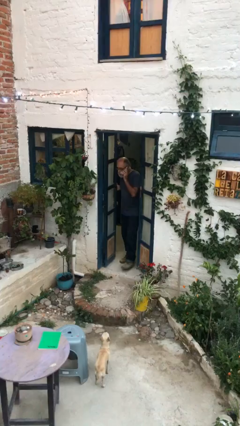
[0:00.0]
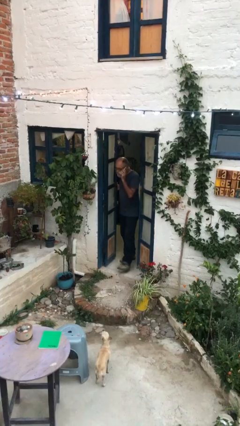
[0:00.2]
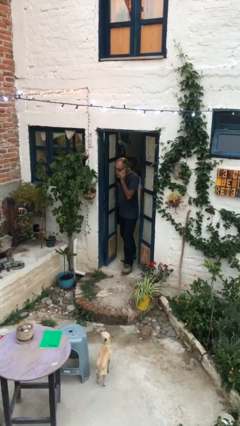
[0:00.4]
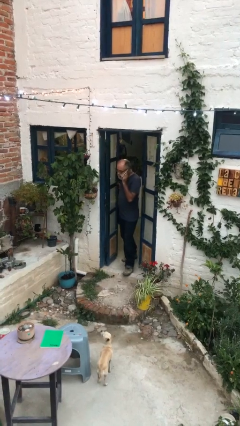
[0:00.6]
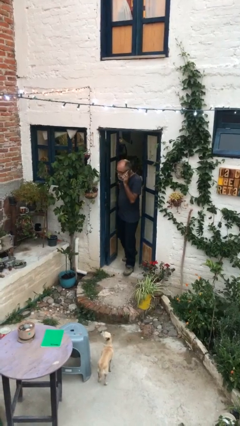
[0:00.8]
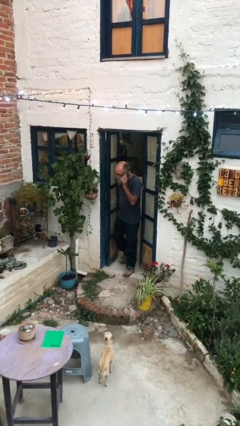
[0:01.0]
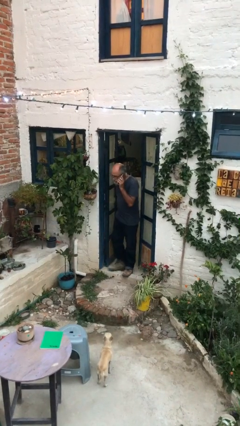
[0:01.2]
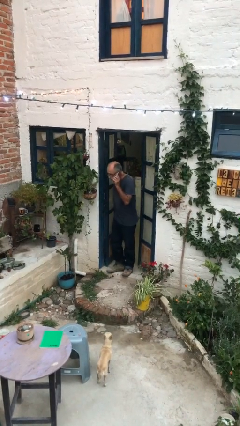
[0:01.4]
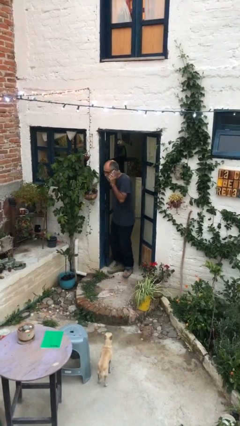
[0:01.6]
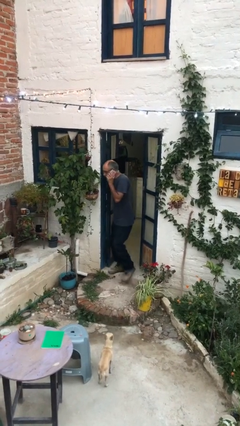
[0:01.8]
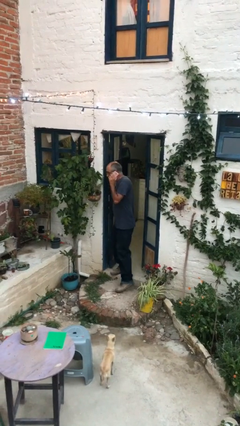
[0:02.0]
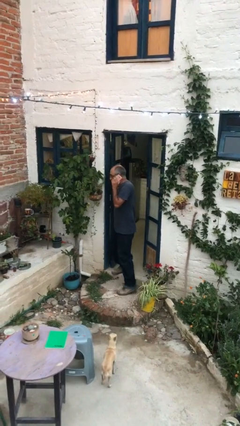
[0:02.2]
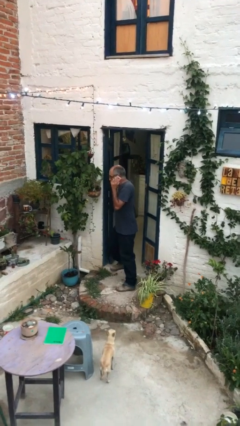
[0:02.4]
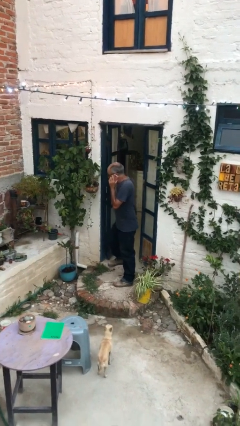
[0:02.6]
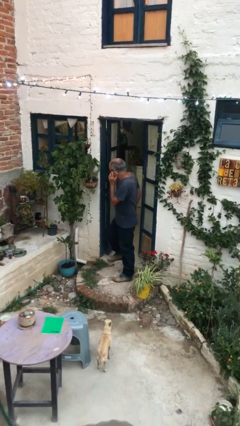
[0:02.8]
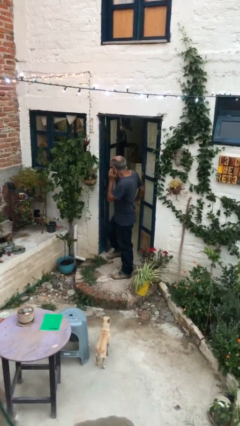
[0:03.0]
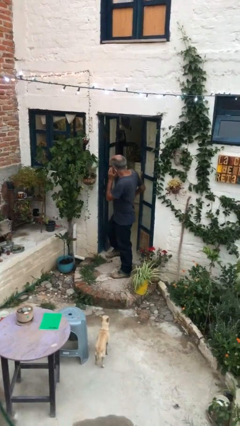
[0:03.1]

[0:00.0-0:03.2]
person enters scene through structure

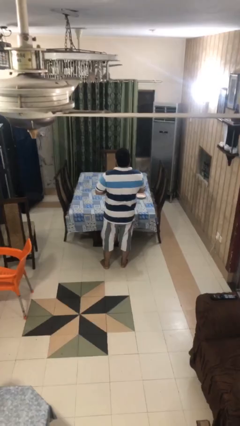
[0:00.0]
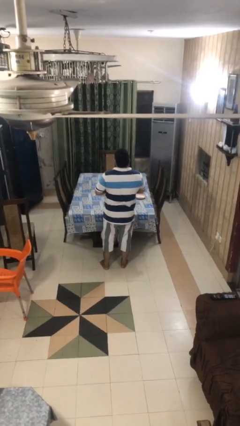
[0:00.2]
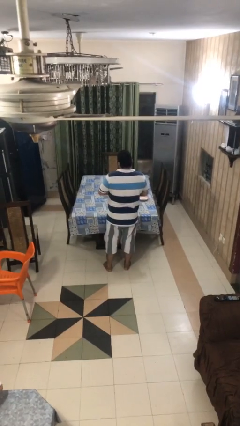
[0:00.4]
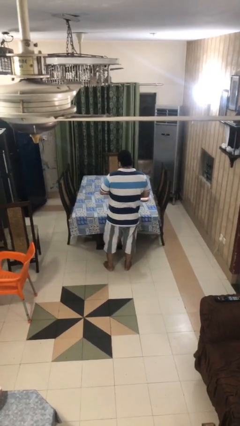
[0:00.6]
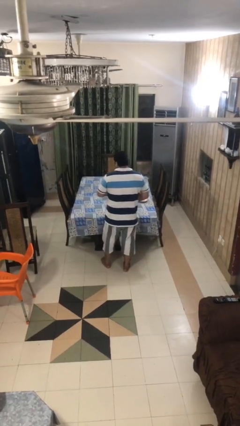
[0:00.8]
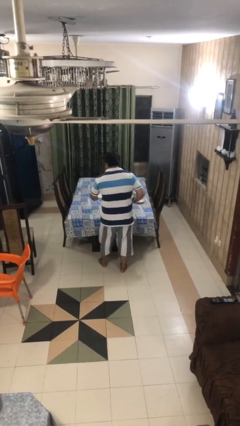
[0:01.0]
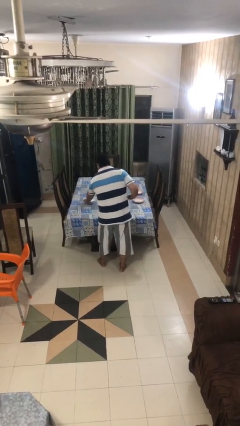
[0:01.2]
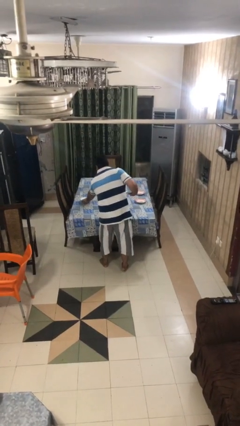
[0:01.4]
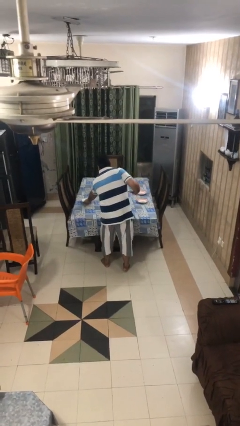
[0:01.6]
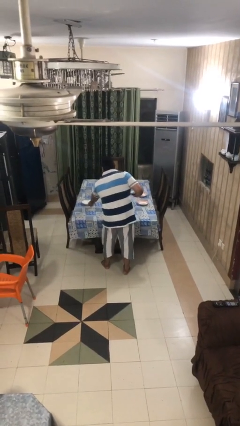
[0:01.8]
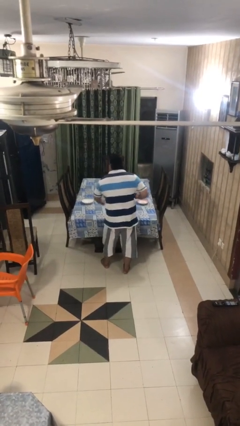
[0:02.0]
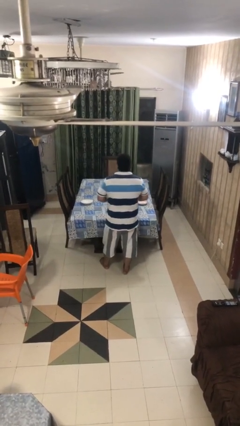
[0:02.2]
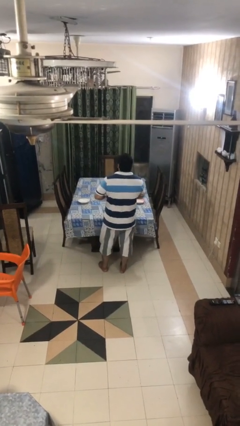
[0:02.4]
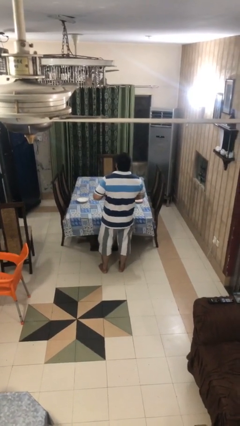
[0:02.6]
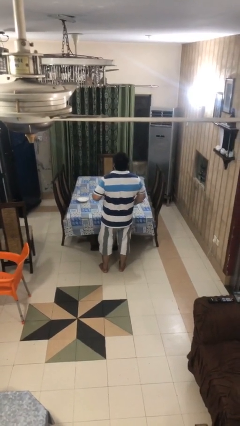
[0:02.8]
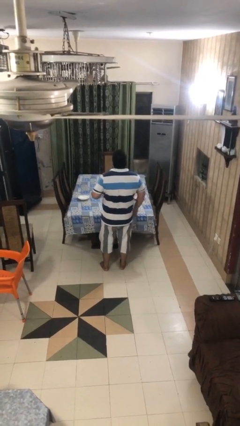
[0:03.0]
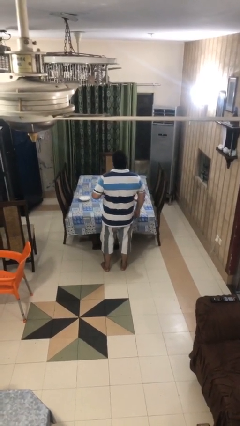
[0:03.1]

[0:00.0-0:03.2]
person sets table

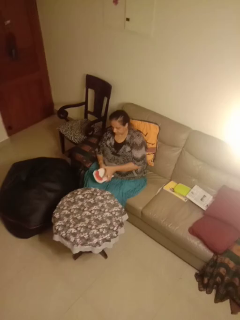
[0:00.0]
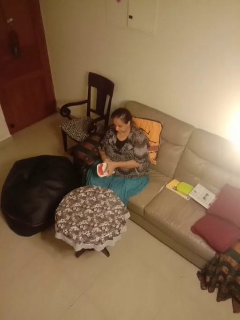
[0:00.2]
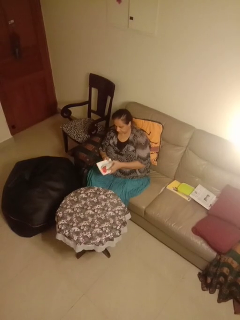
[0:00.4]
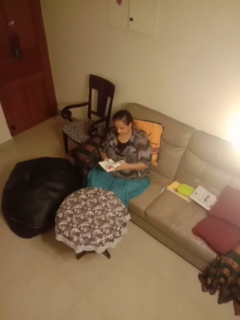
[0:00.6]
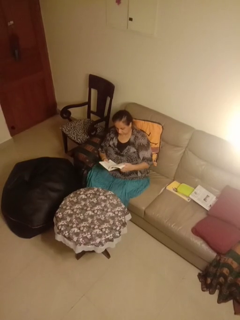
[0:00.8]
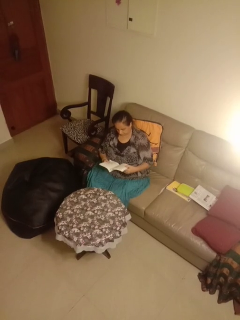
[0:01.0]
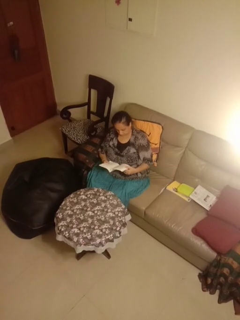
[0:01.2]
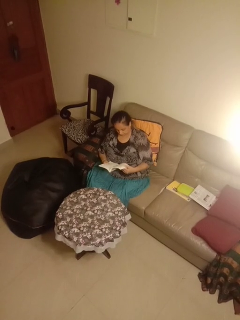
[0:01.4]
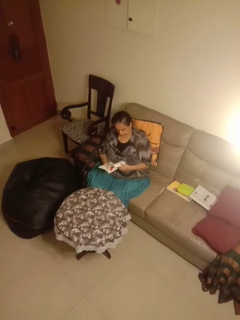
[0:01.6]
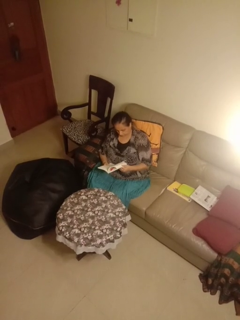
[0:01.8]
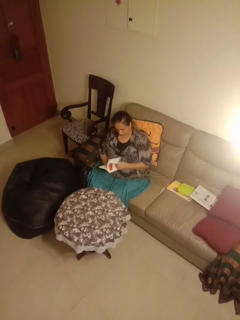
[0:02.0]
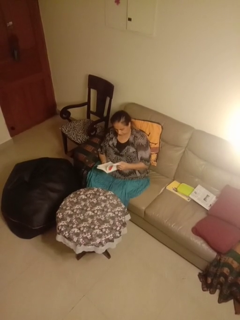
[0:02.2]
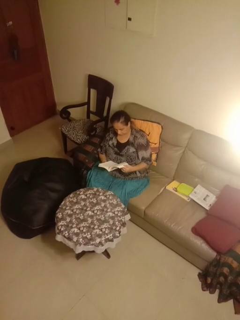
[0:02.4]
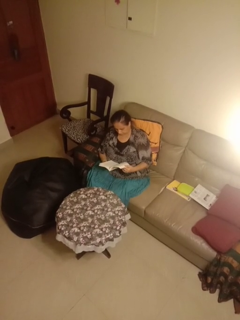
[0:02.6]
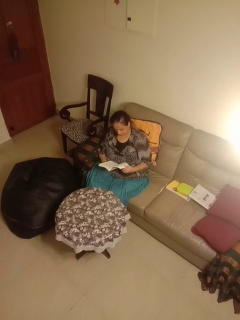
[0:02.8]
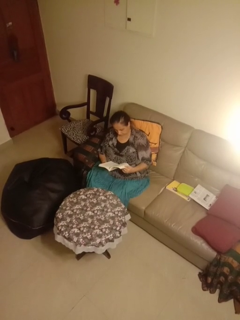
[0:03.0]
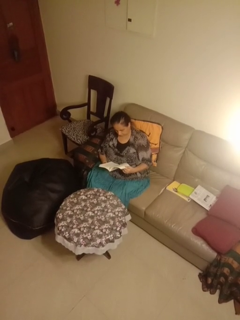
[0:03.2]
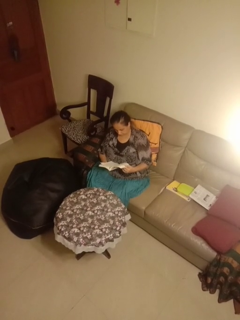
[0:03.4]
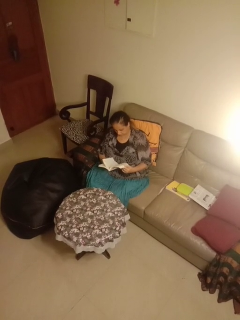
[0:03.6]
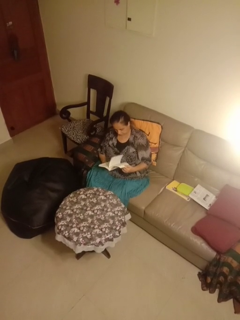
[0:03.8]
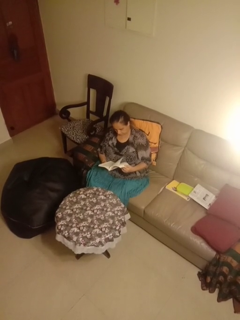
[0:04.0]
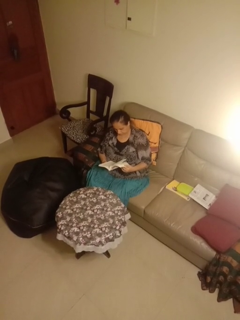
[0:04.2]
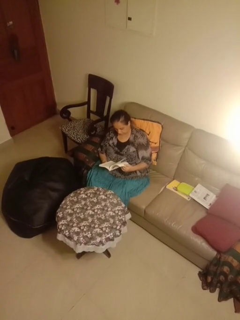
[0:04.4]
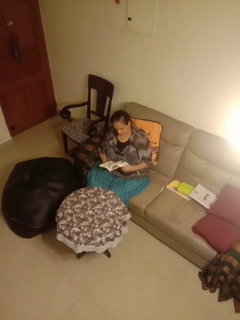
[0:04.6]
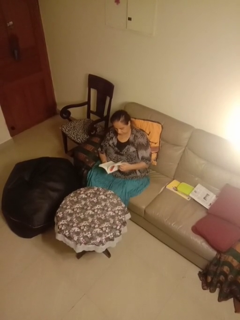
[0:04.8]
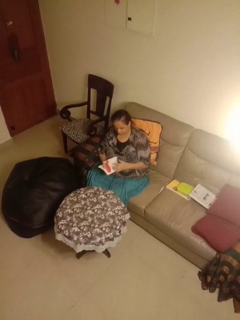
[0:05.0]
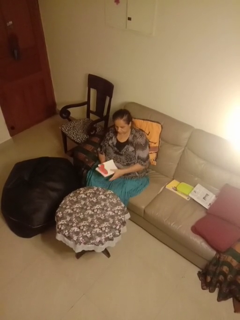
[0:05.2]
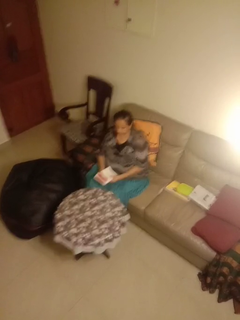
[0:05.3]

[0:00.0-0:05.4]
person reads book

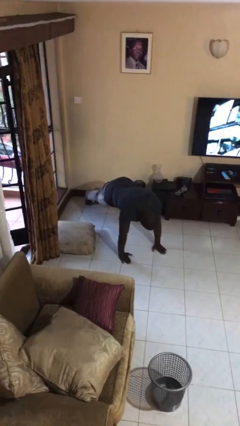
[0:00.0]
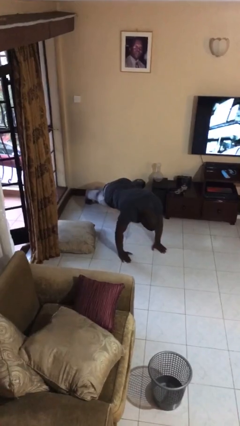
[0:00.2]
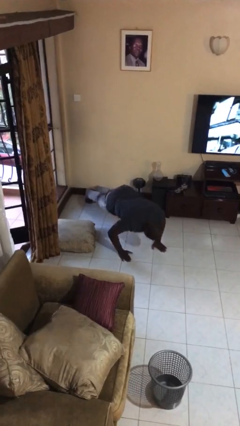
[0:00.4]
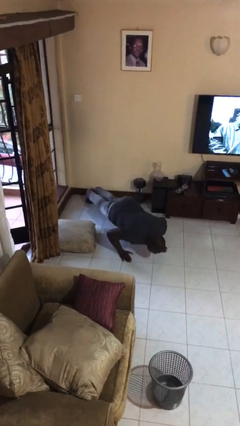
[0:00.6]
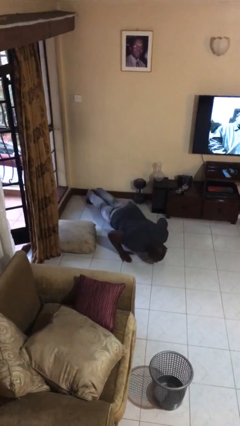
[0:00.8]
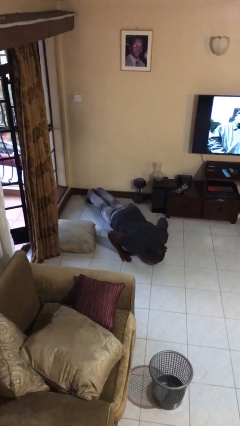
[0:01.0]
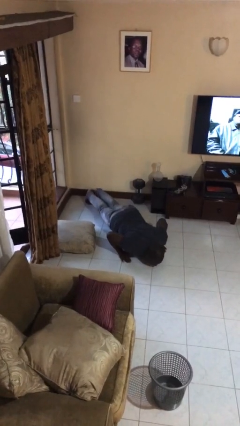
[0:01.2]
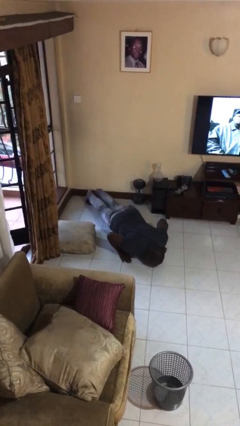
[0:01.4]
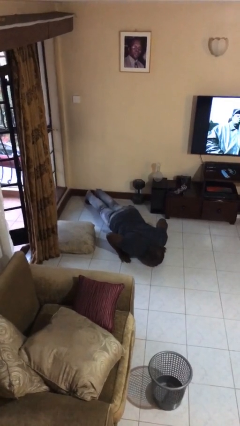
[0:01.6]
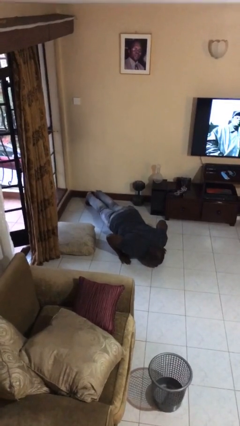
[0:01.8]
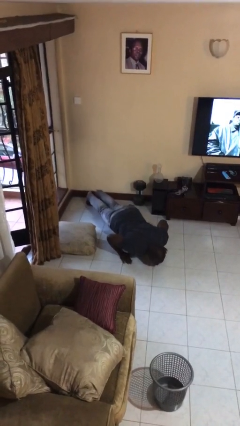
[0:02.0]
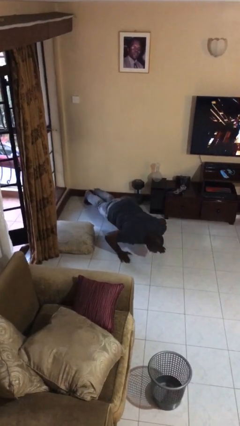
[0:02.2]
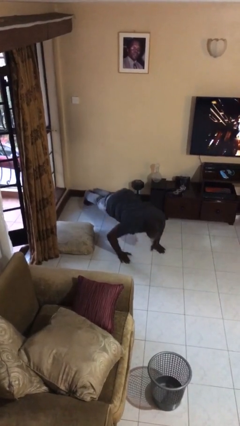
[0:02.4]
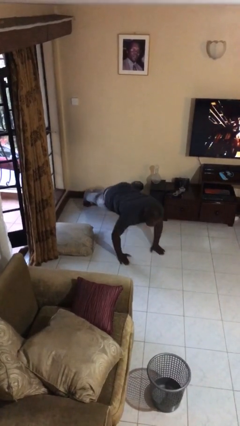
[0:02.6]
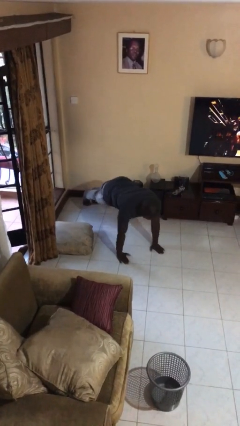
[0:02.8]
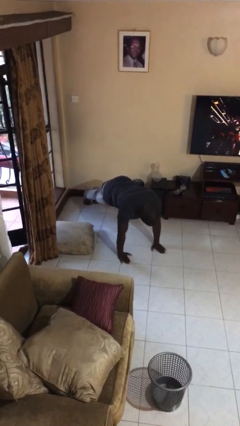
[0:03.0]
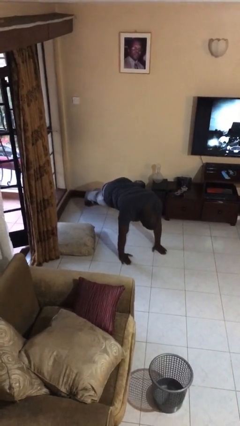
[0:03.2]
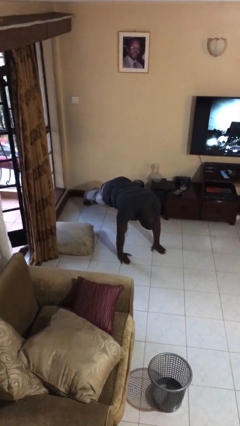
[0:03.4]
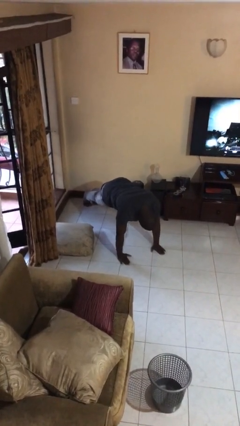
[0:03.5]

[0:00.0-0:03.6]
person exercises with pushup

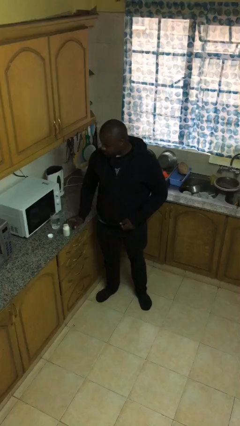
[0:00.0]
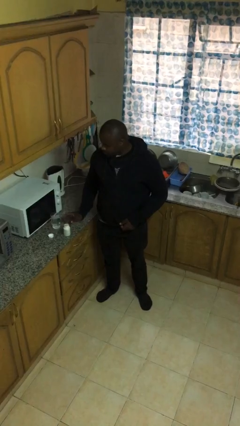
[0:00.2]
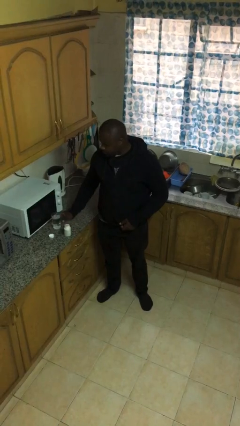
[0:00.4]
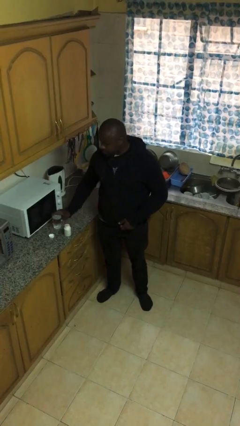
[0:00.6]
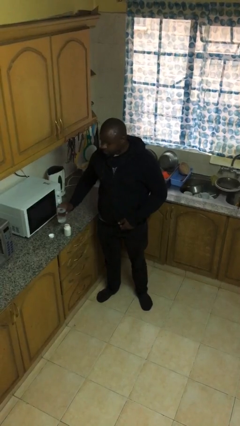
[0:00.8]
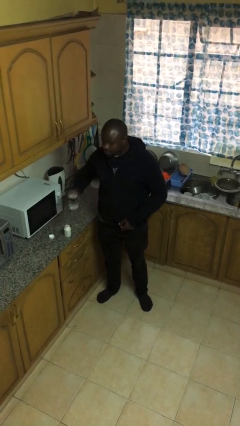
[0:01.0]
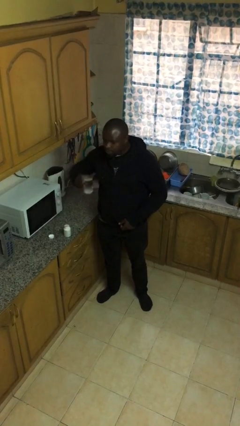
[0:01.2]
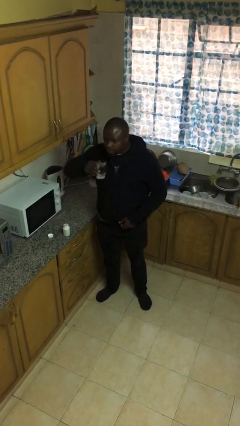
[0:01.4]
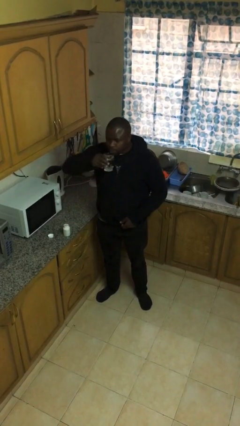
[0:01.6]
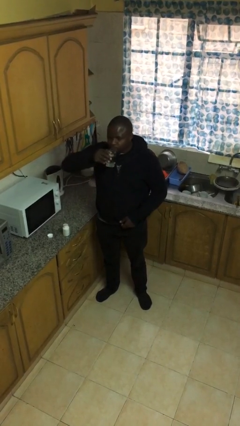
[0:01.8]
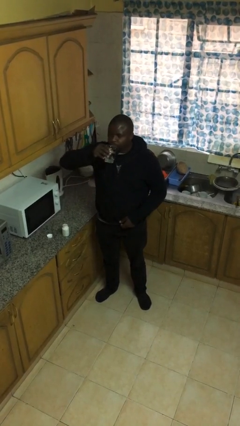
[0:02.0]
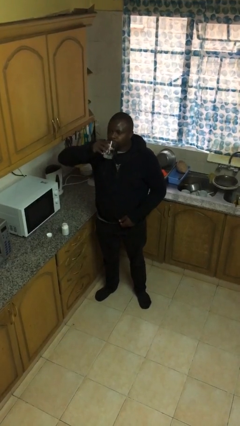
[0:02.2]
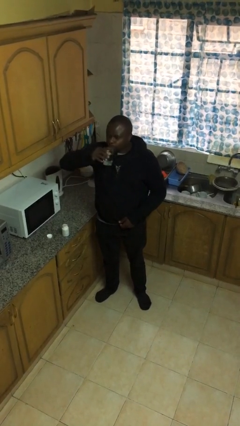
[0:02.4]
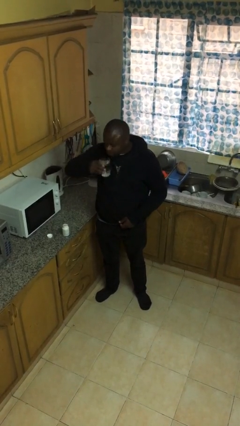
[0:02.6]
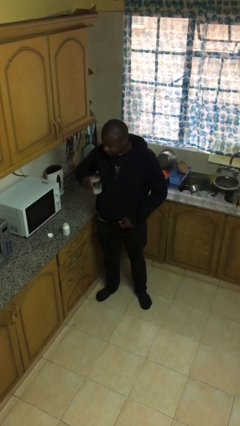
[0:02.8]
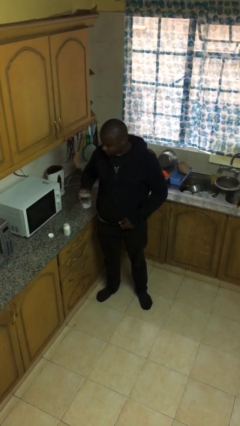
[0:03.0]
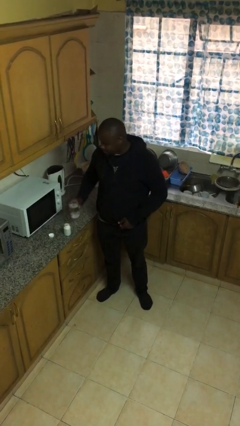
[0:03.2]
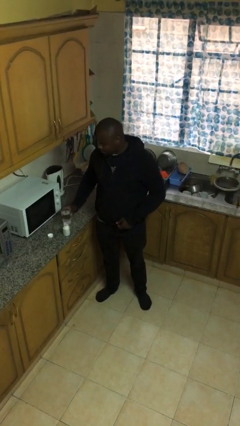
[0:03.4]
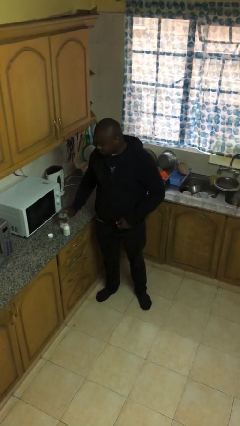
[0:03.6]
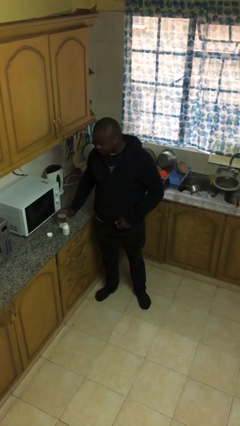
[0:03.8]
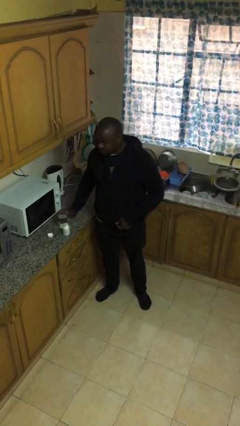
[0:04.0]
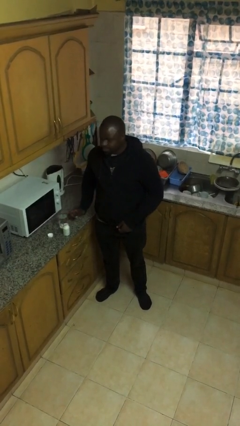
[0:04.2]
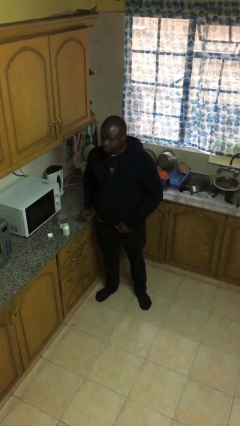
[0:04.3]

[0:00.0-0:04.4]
person drinks from cup
